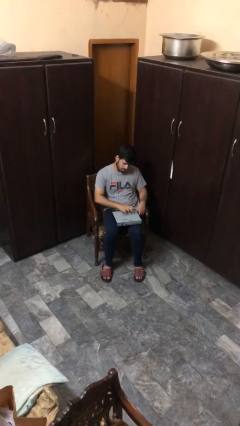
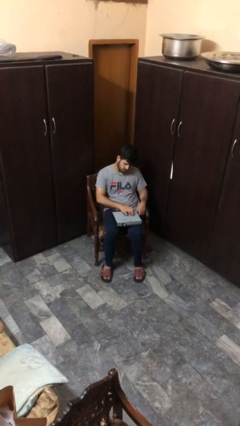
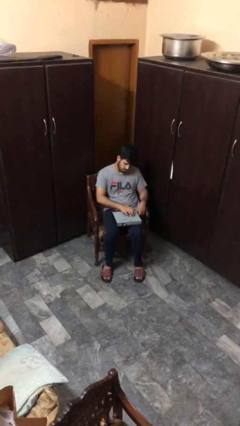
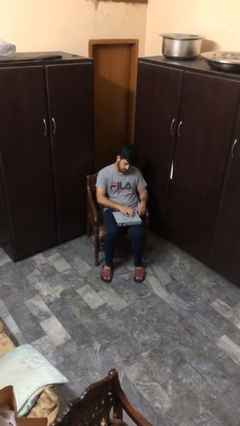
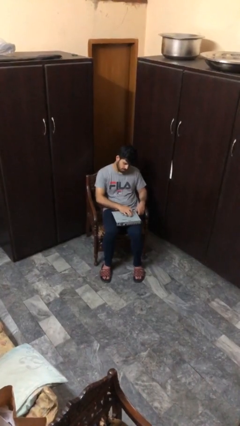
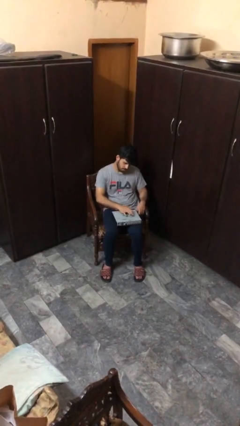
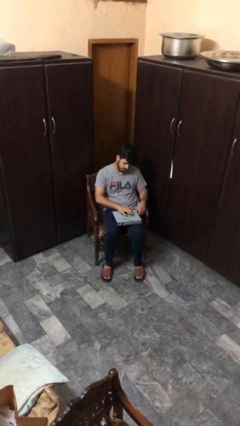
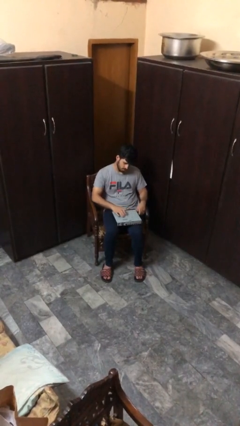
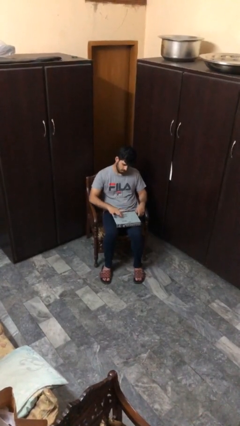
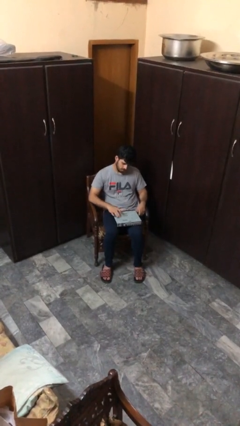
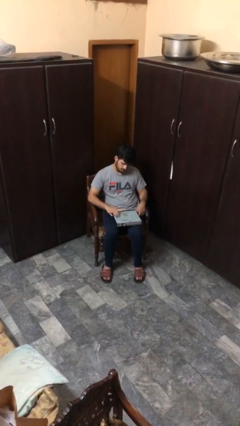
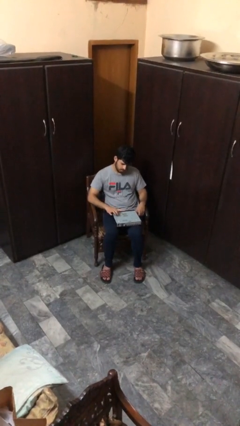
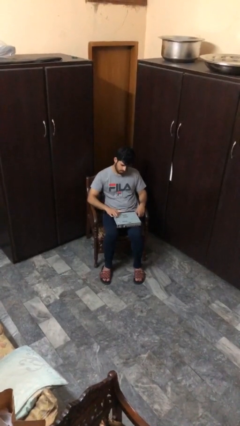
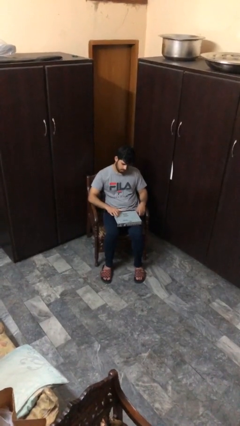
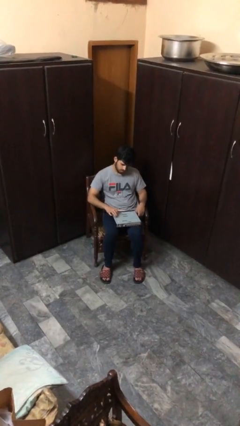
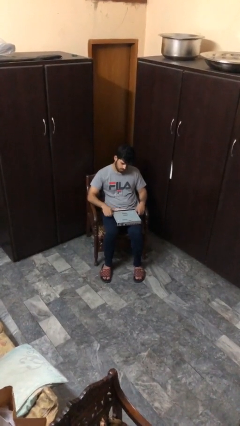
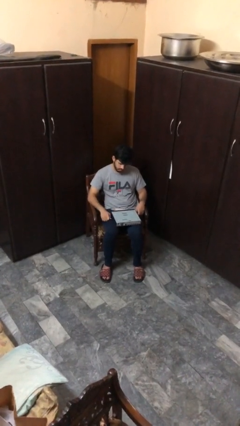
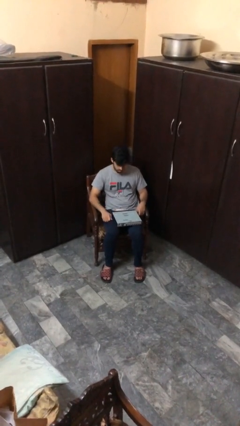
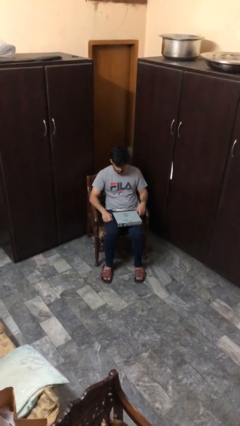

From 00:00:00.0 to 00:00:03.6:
person taps object with finger

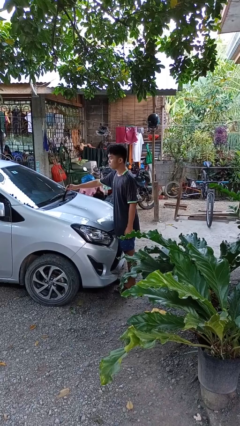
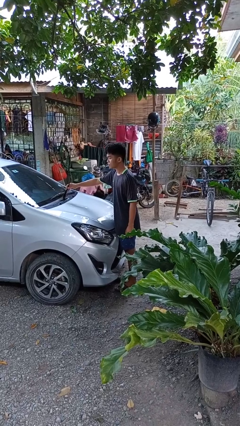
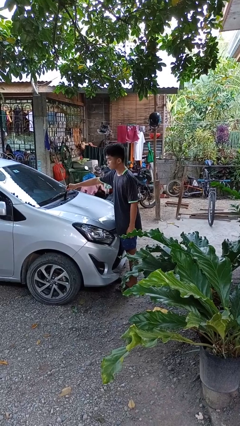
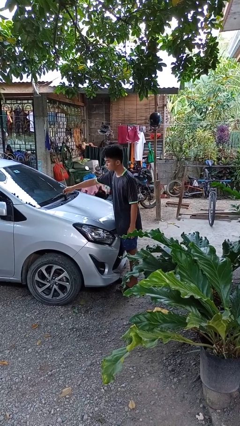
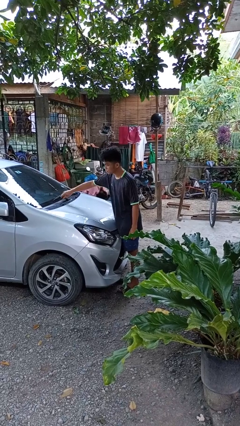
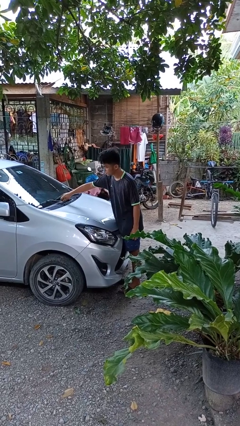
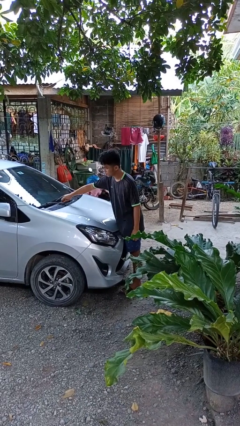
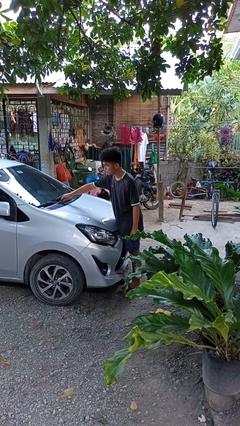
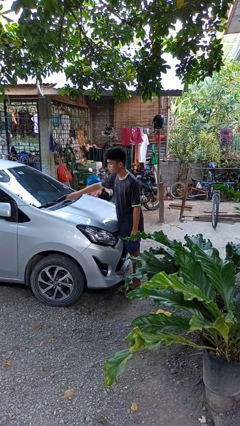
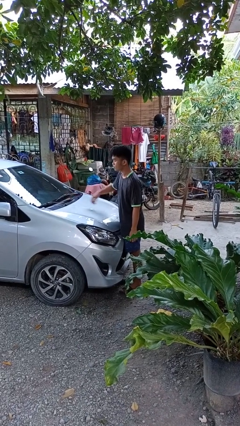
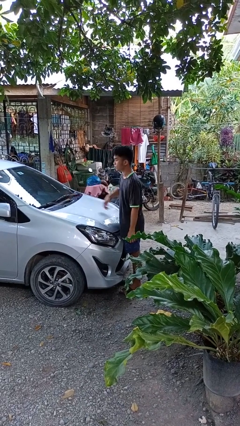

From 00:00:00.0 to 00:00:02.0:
person flips down car wipers

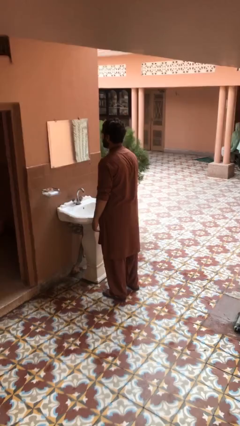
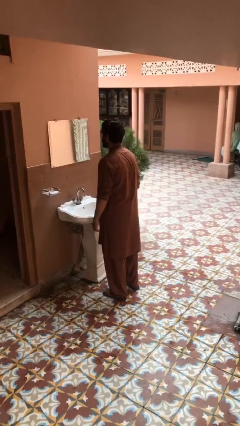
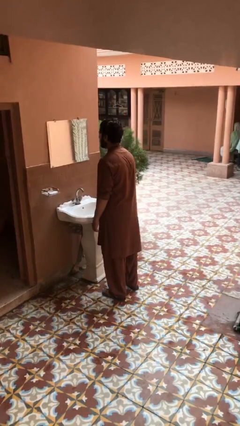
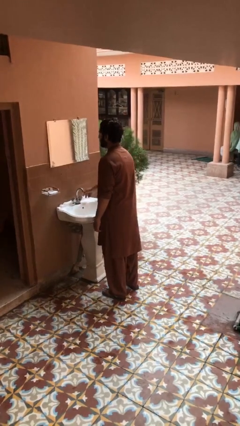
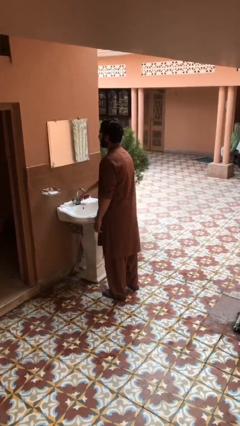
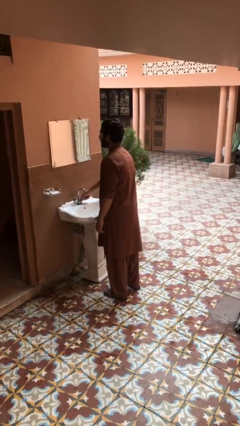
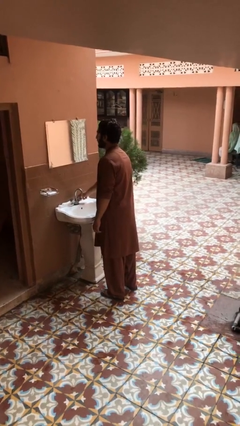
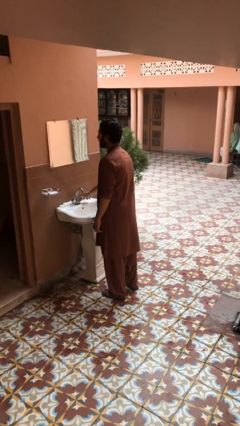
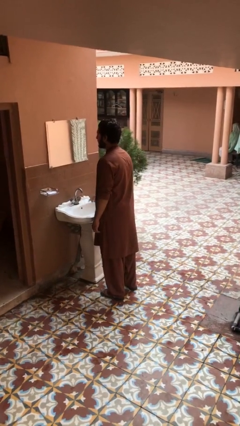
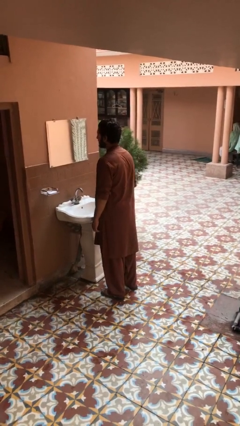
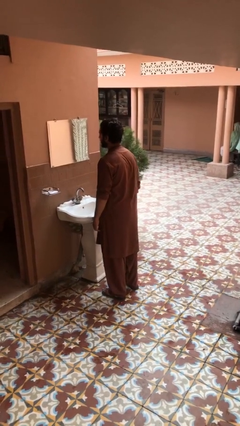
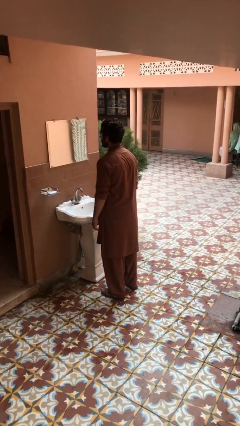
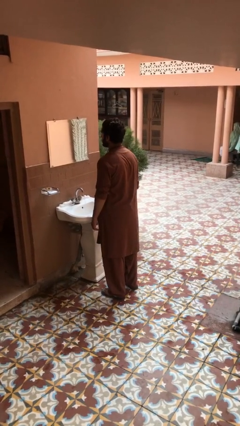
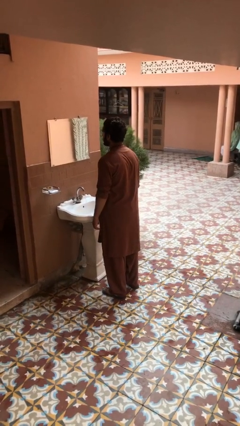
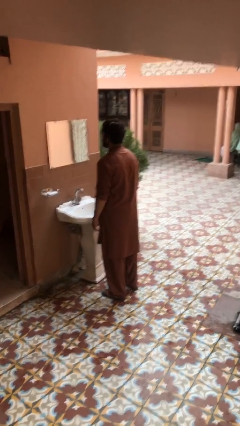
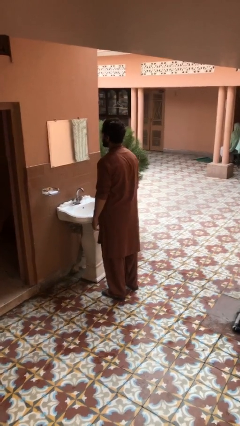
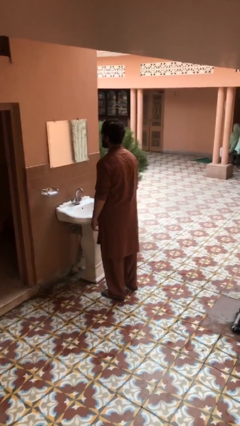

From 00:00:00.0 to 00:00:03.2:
person turns on faucet

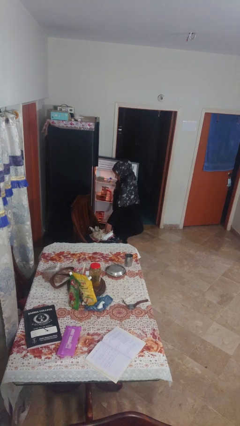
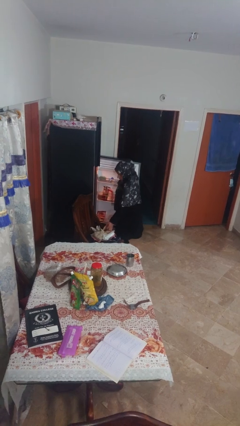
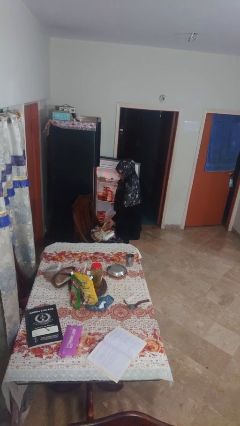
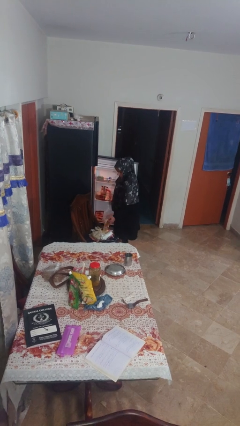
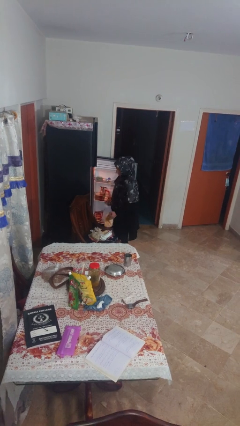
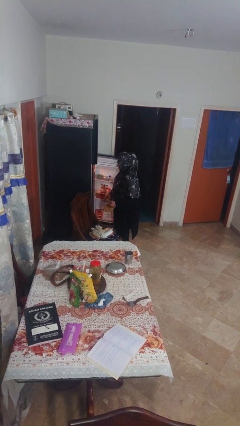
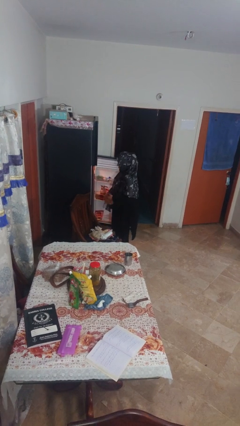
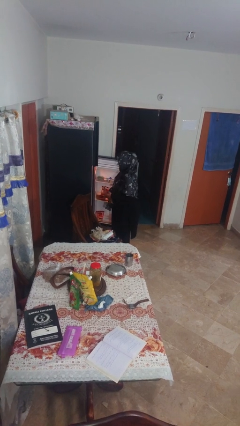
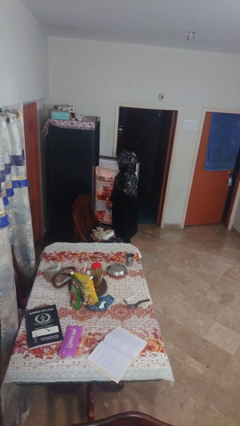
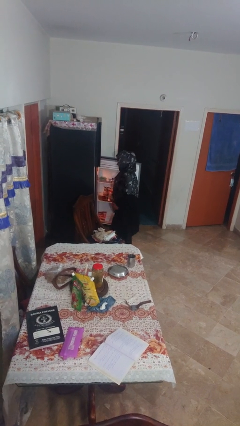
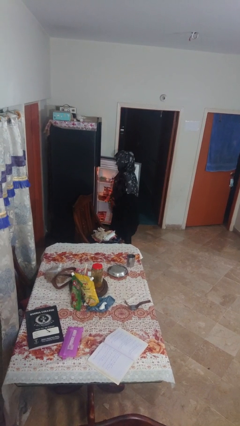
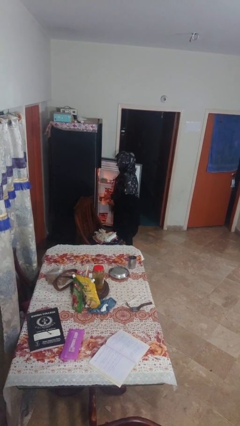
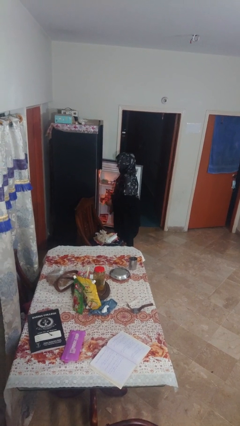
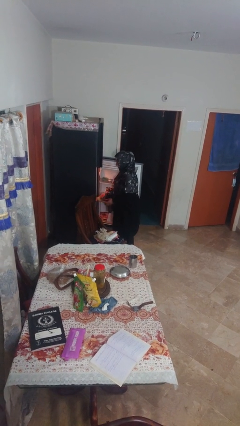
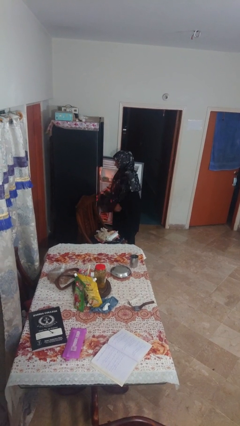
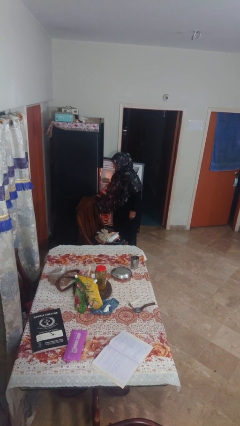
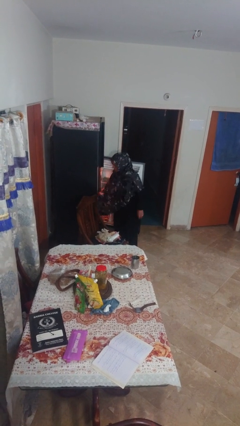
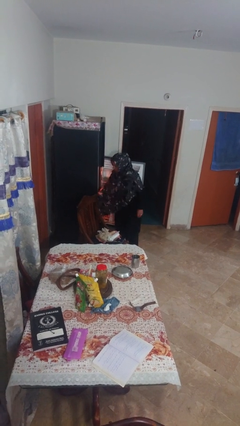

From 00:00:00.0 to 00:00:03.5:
person loads groceries into refrigerator

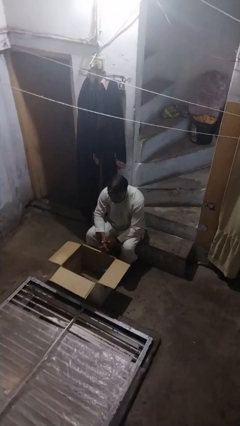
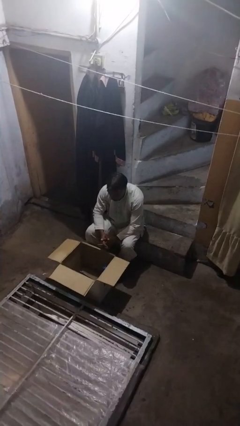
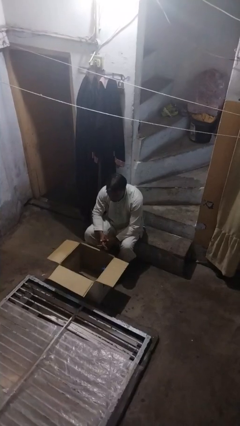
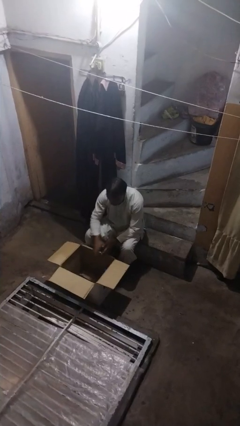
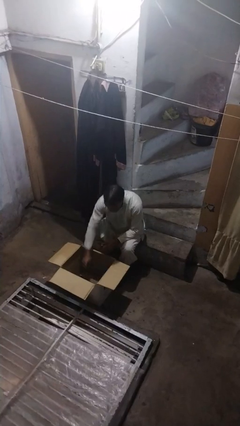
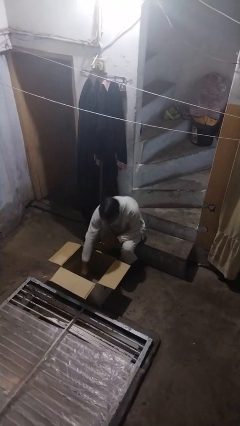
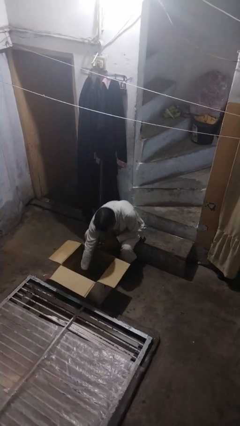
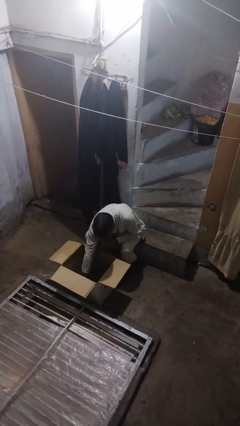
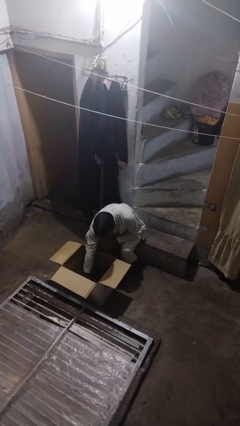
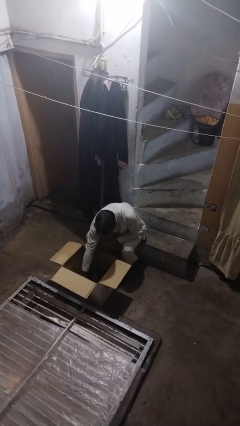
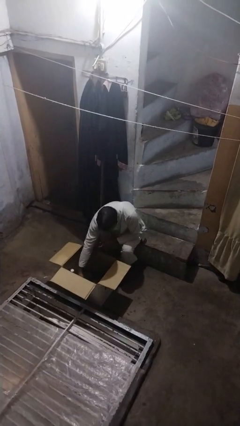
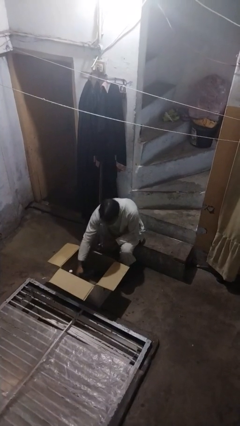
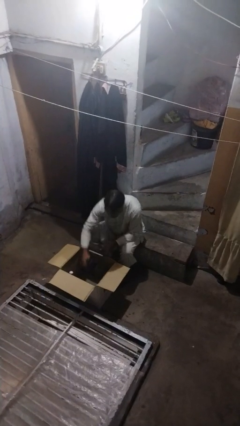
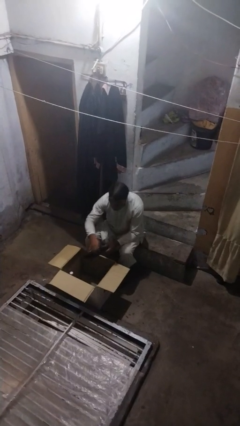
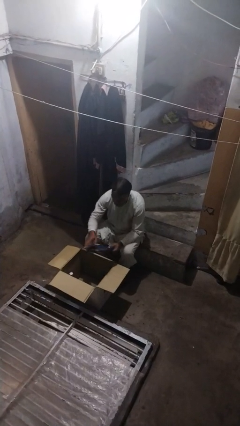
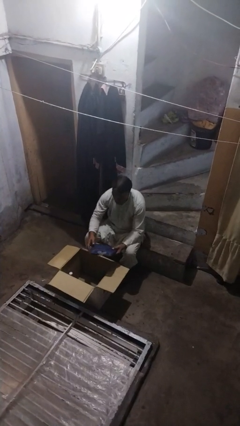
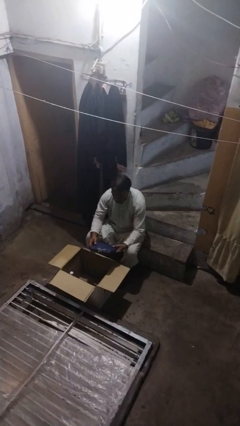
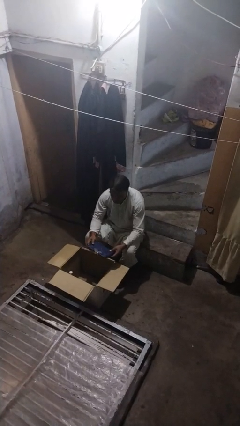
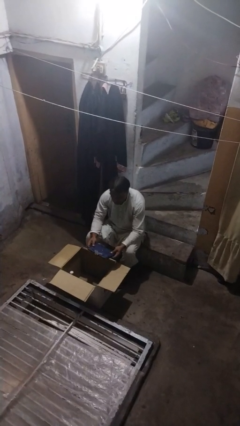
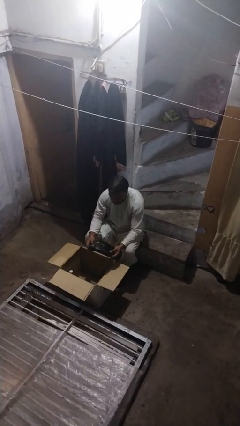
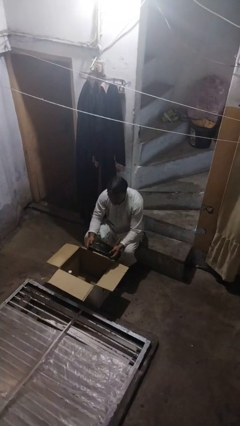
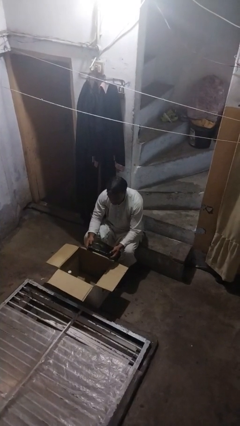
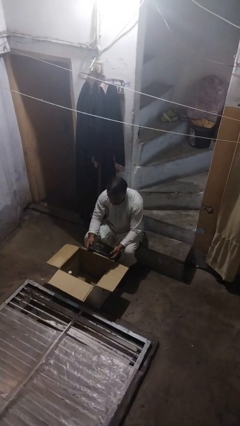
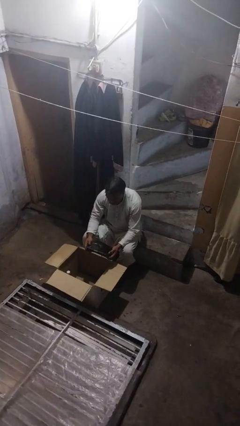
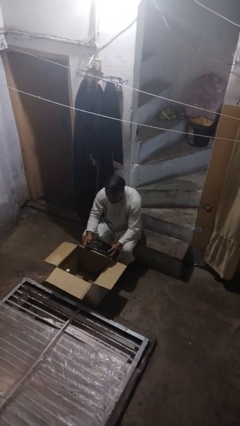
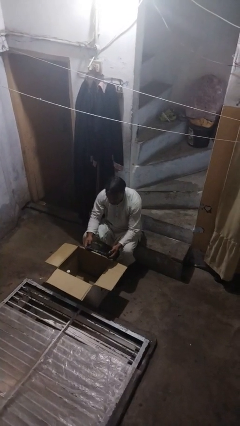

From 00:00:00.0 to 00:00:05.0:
person takes object from box

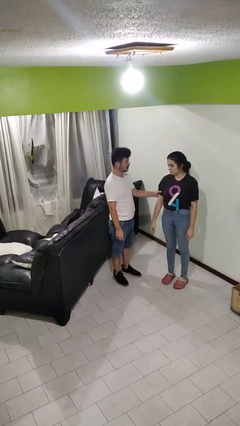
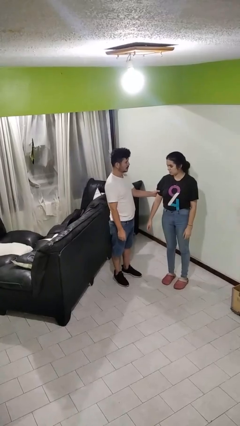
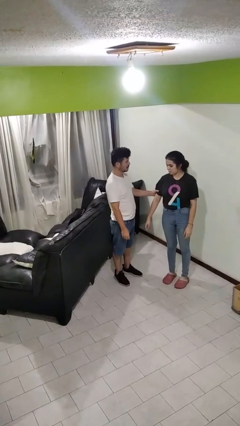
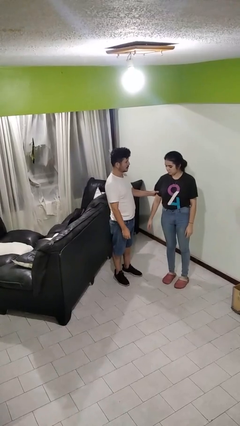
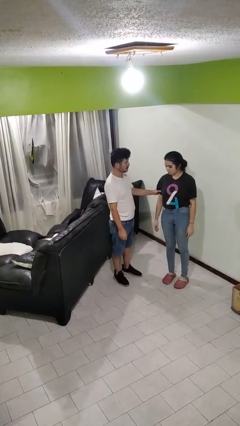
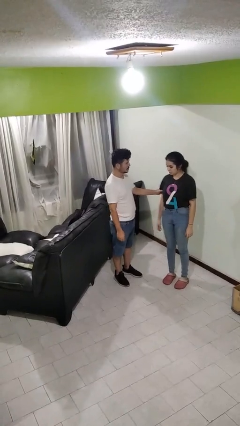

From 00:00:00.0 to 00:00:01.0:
person grabs person by bicep
